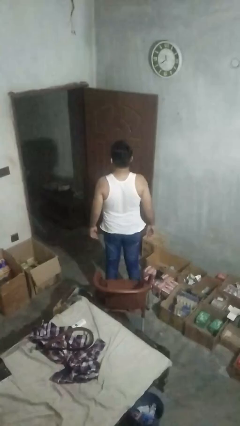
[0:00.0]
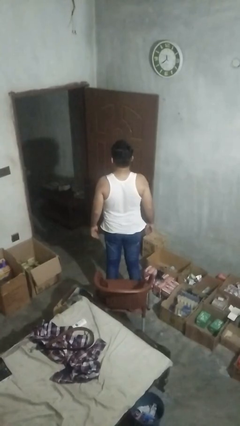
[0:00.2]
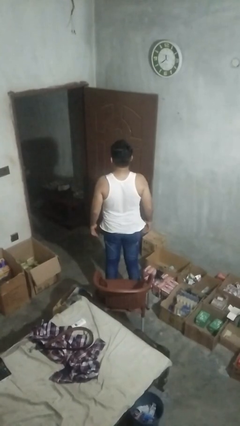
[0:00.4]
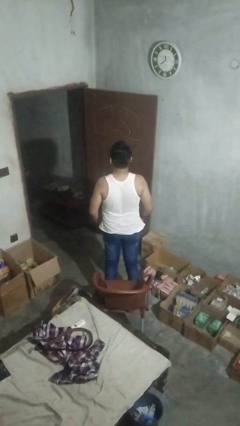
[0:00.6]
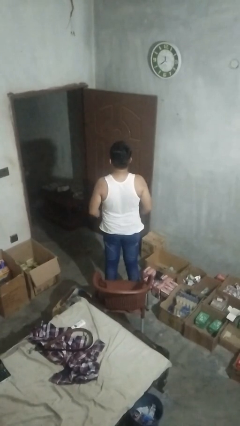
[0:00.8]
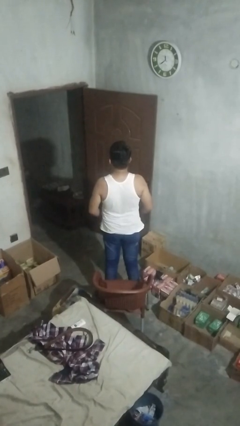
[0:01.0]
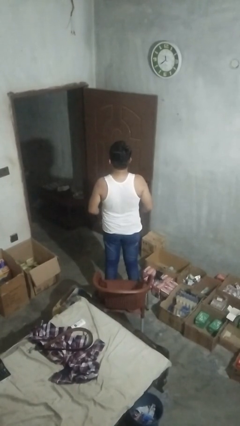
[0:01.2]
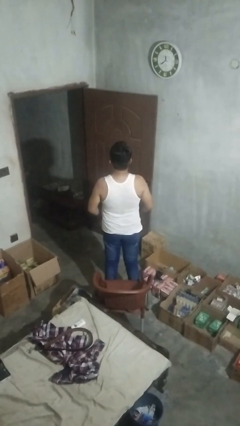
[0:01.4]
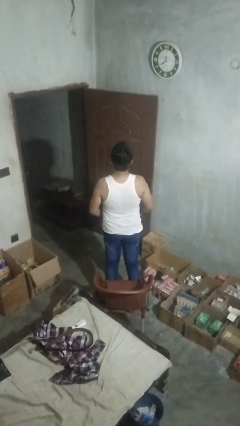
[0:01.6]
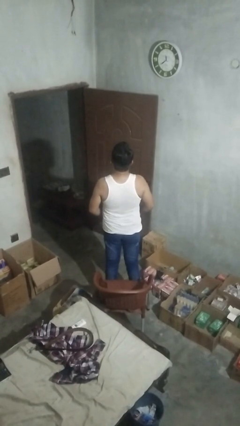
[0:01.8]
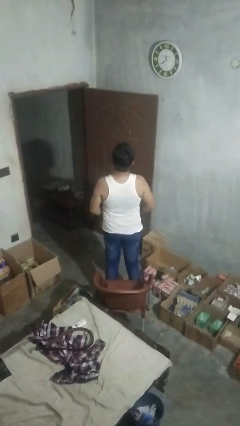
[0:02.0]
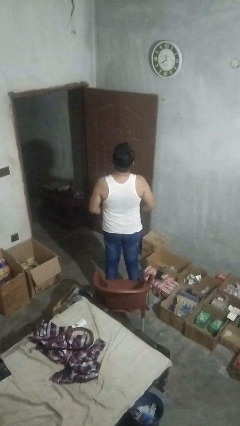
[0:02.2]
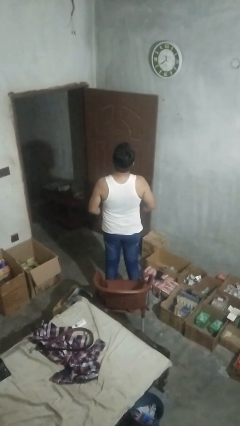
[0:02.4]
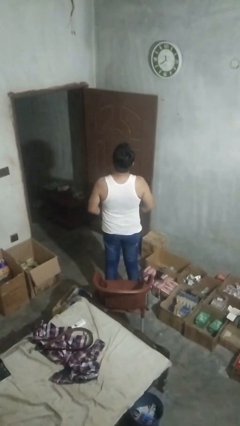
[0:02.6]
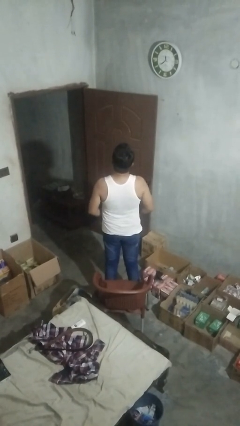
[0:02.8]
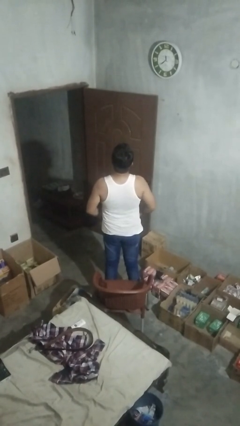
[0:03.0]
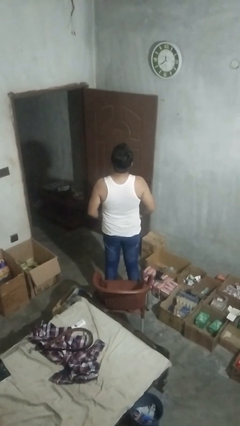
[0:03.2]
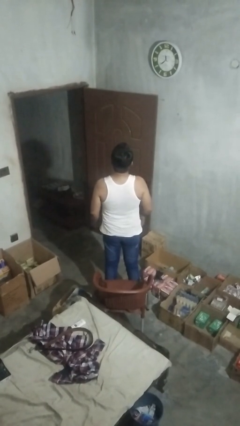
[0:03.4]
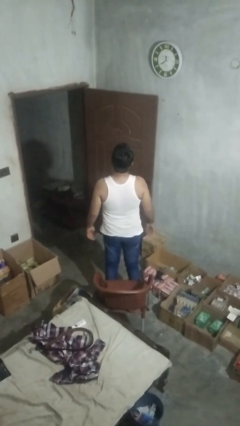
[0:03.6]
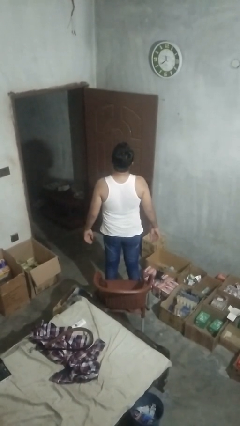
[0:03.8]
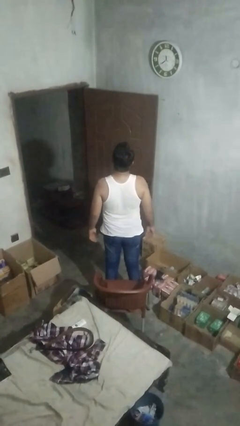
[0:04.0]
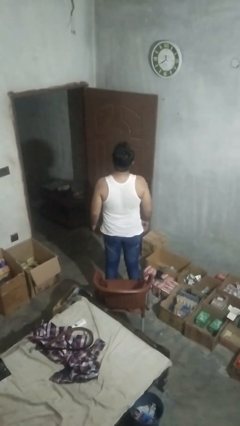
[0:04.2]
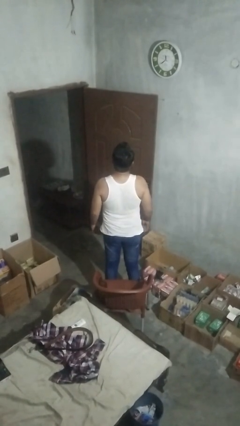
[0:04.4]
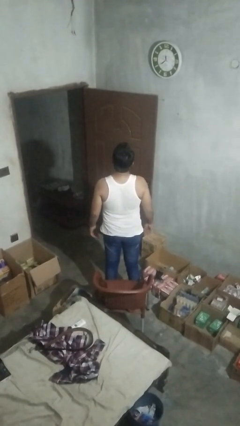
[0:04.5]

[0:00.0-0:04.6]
person hikes up pants

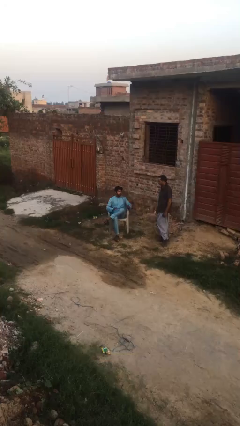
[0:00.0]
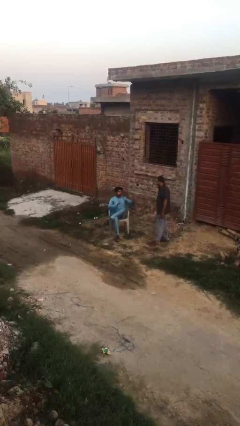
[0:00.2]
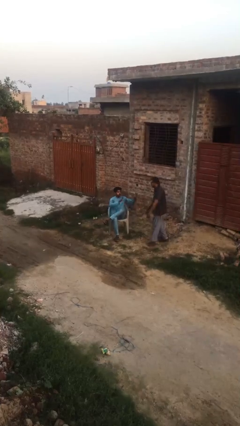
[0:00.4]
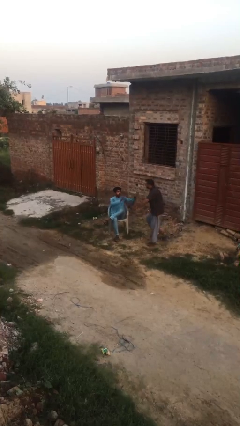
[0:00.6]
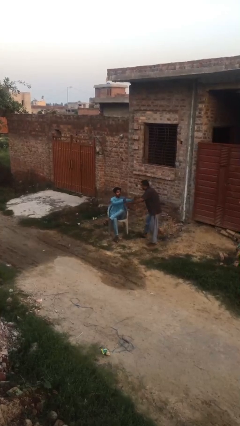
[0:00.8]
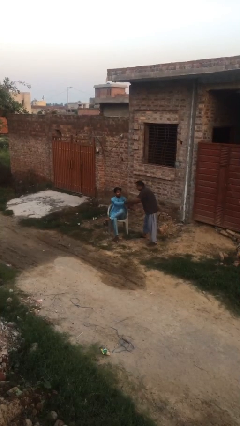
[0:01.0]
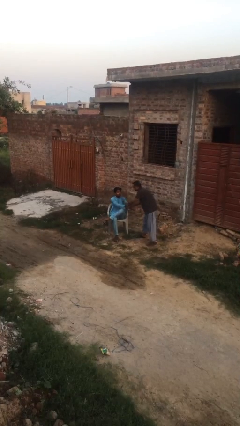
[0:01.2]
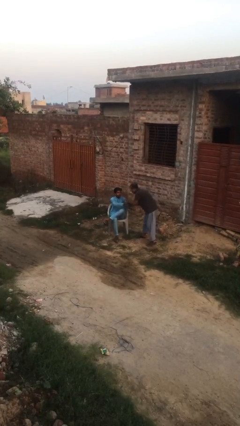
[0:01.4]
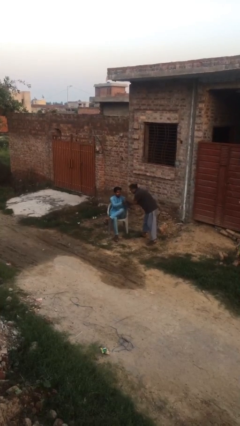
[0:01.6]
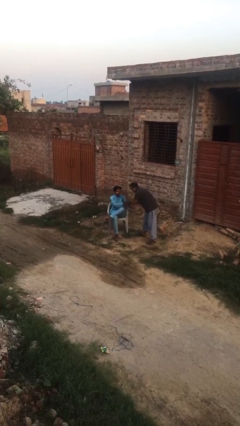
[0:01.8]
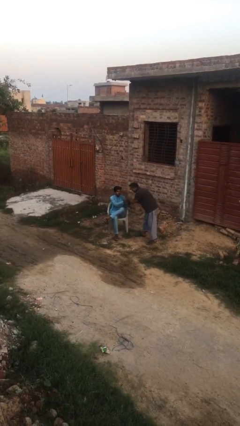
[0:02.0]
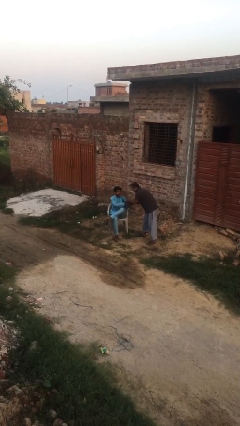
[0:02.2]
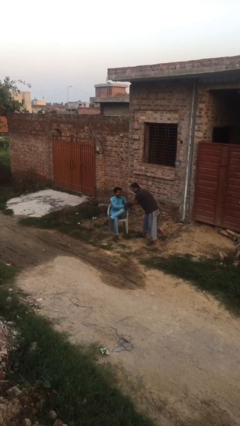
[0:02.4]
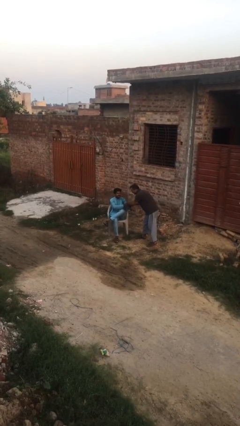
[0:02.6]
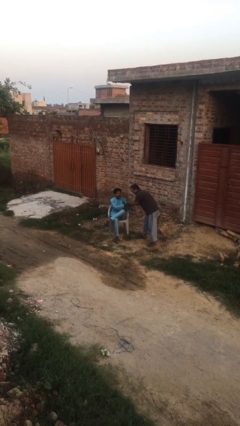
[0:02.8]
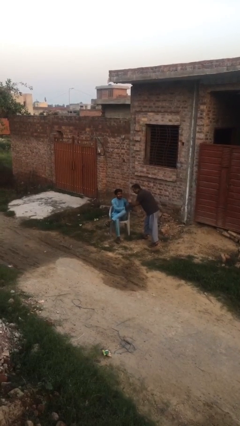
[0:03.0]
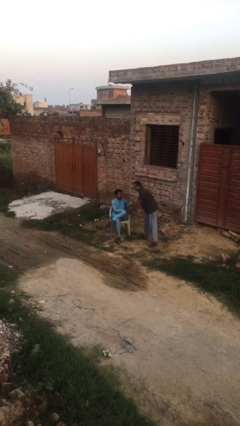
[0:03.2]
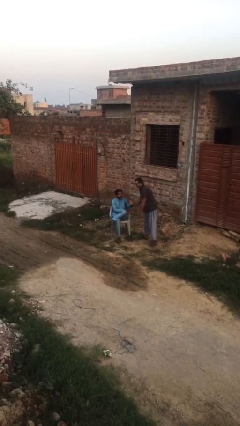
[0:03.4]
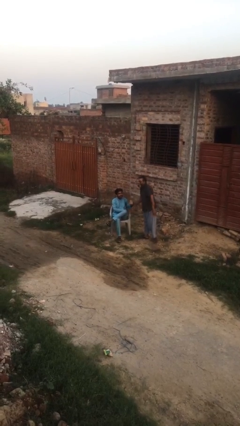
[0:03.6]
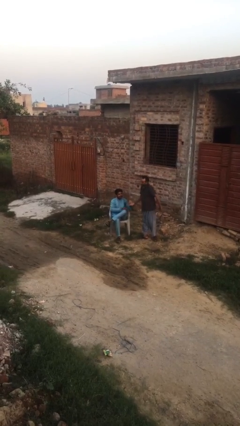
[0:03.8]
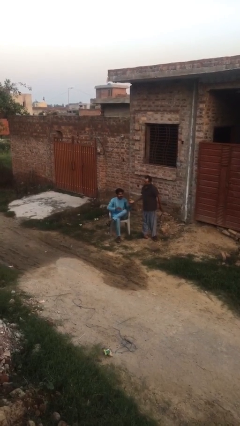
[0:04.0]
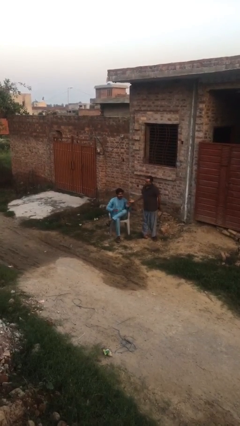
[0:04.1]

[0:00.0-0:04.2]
person shakes hand

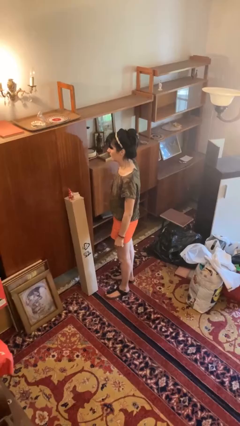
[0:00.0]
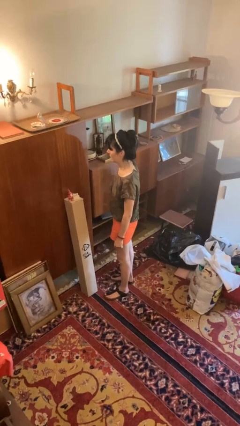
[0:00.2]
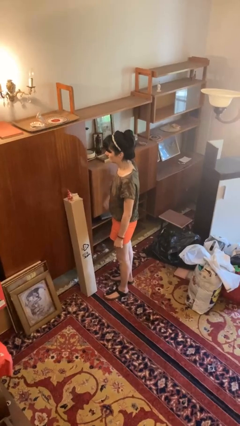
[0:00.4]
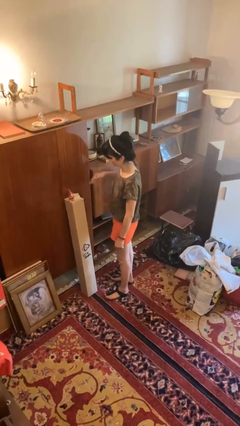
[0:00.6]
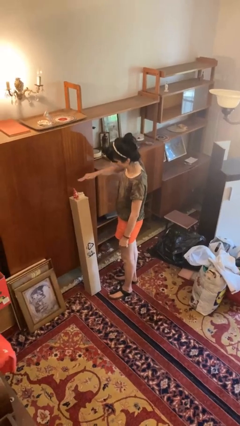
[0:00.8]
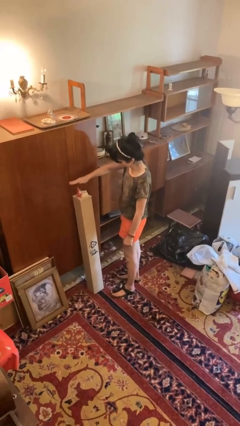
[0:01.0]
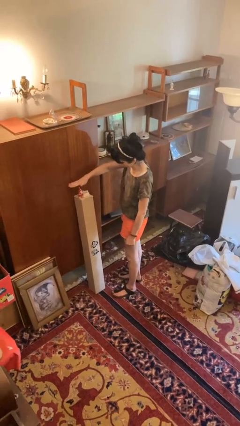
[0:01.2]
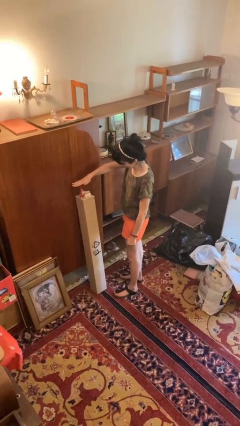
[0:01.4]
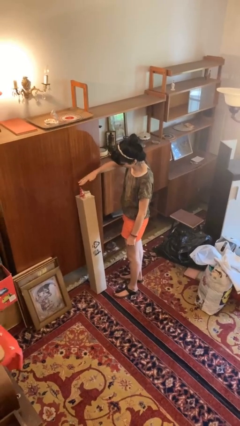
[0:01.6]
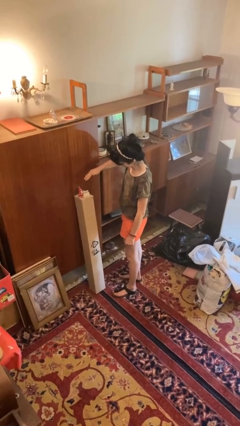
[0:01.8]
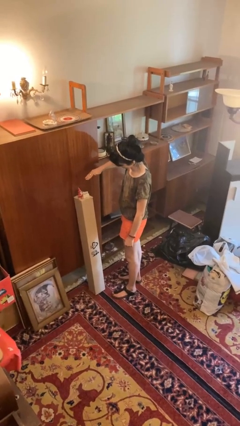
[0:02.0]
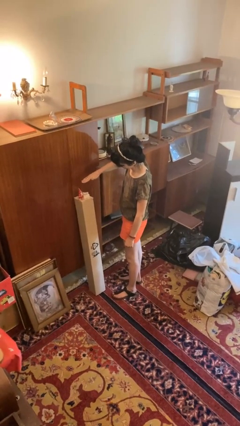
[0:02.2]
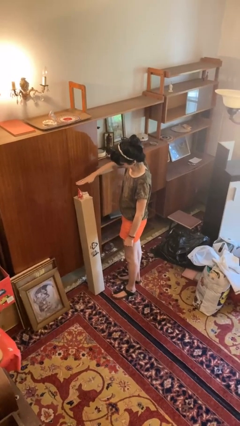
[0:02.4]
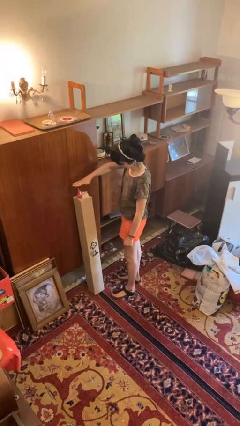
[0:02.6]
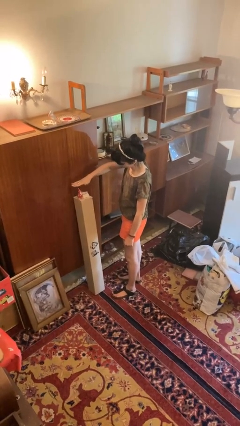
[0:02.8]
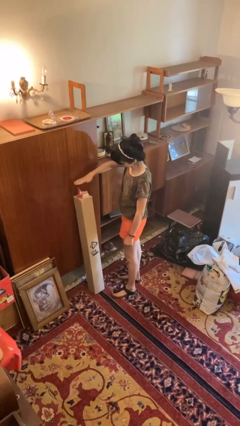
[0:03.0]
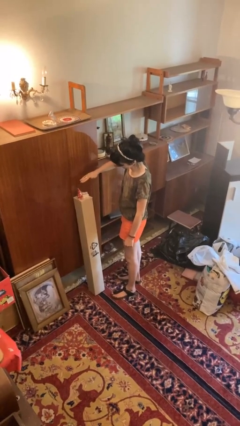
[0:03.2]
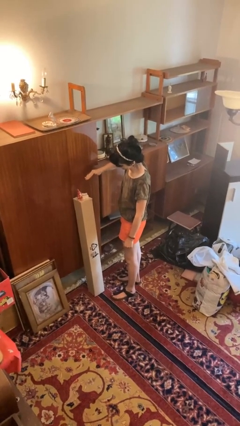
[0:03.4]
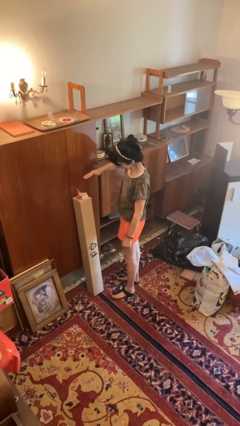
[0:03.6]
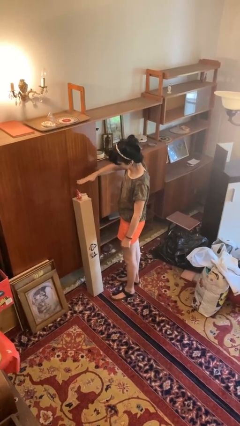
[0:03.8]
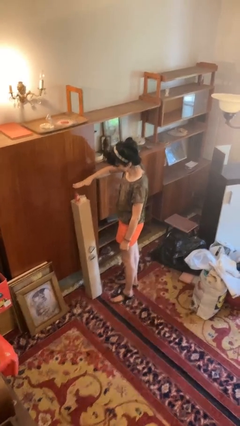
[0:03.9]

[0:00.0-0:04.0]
person waves hand over object

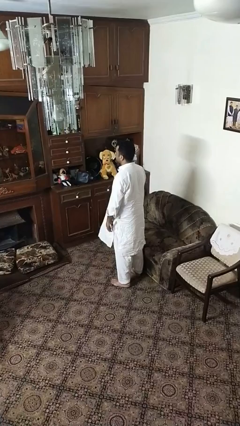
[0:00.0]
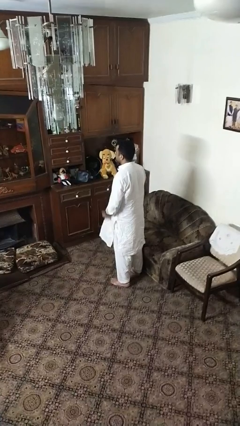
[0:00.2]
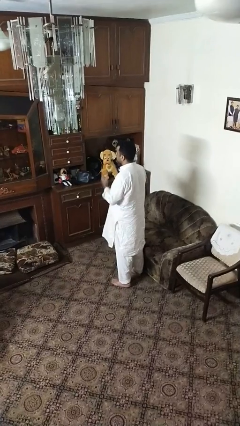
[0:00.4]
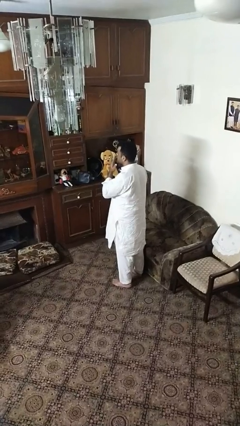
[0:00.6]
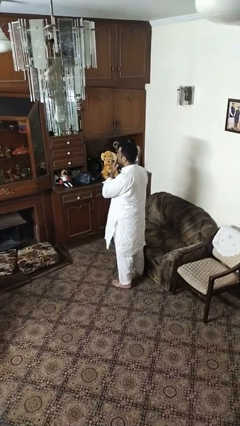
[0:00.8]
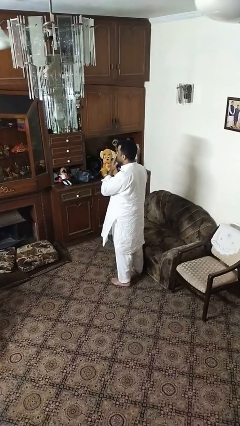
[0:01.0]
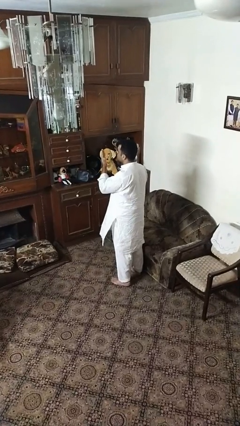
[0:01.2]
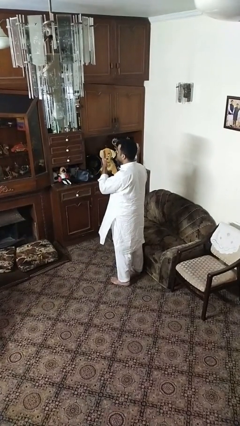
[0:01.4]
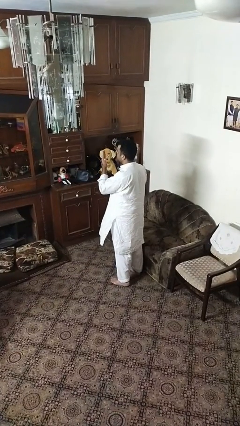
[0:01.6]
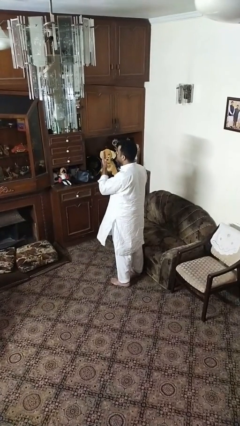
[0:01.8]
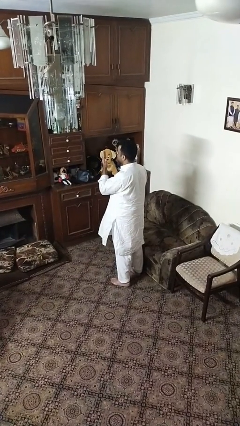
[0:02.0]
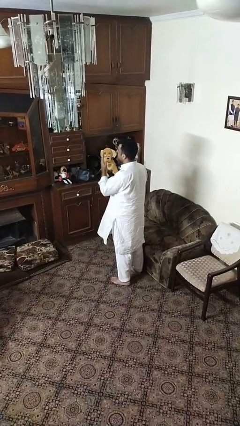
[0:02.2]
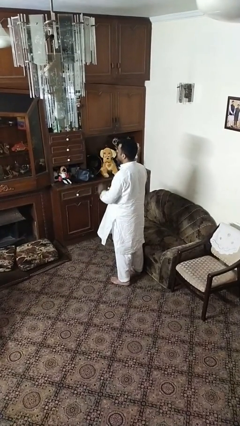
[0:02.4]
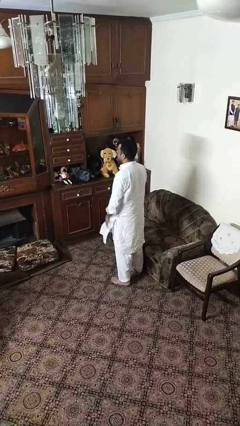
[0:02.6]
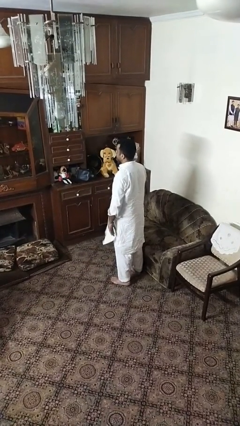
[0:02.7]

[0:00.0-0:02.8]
person gestures blow kiss

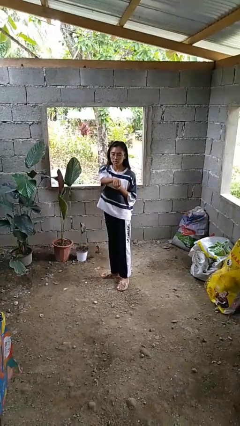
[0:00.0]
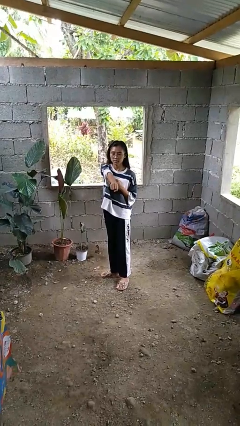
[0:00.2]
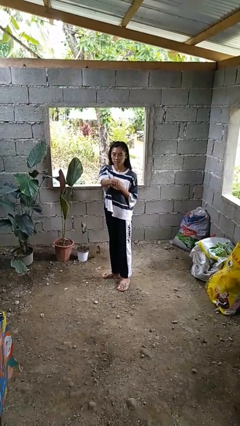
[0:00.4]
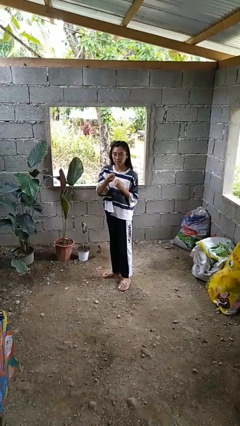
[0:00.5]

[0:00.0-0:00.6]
person karate chop

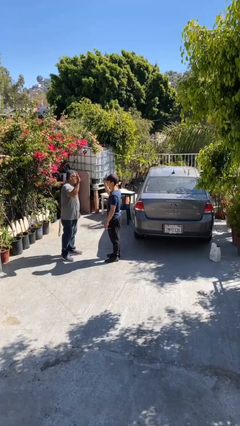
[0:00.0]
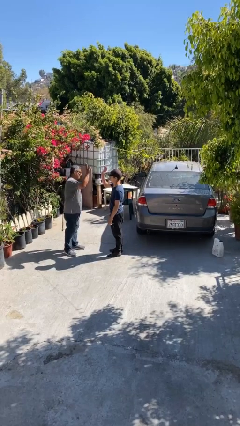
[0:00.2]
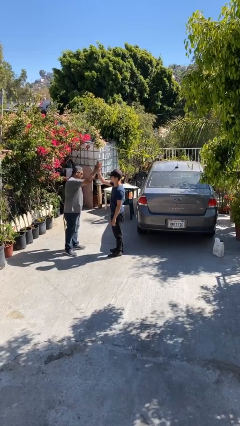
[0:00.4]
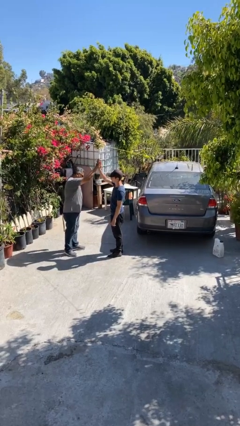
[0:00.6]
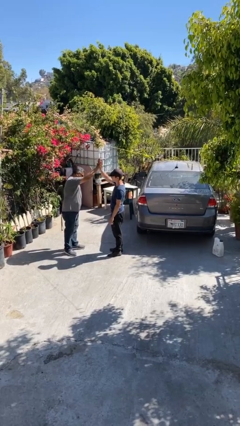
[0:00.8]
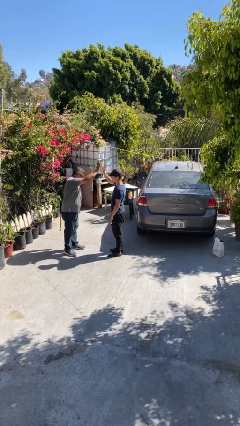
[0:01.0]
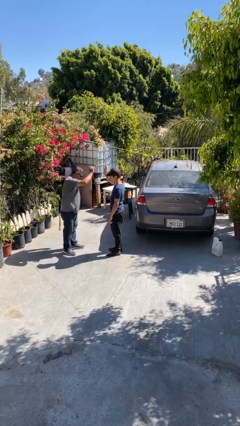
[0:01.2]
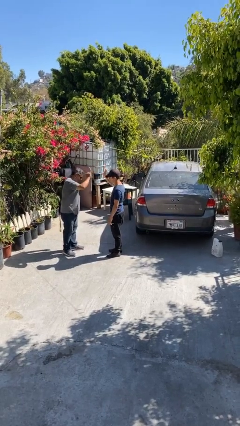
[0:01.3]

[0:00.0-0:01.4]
person highfives hand

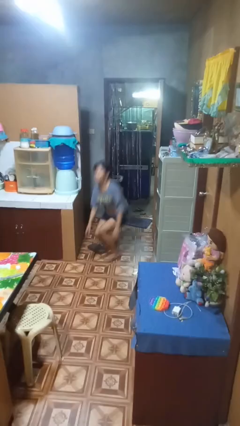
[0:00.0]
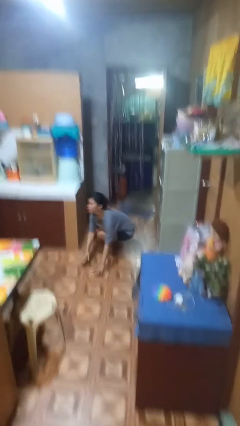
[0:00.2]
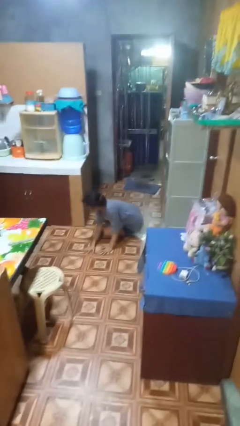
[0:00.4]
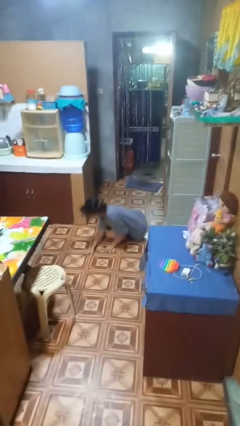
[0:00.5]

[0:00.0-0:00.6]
person trips on object on floor
